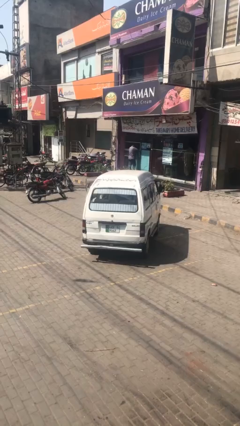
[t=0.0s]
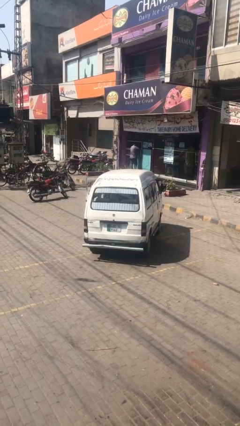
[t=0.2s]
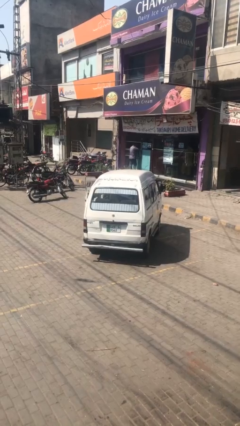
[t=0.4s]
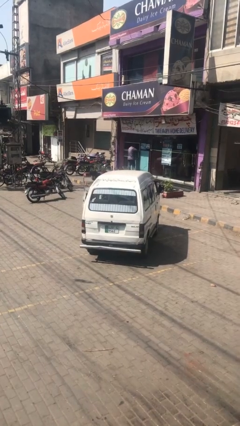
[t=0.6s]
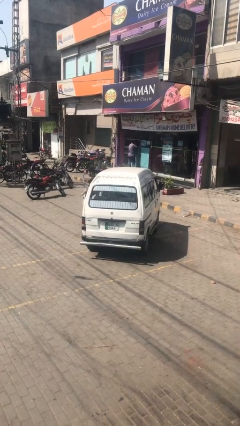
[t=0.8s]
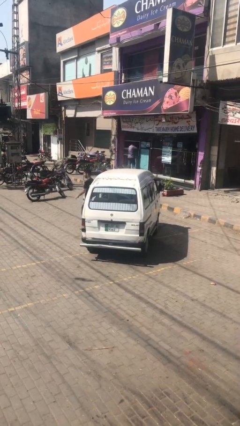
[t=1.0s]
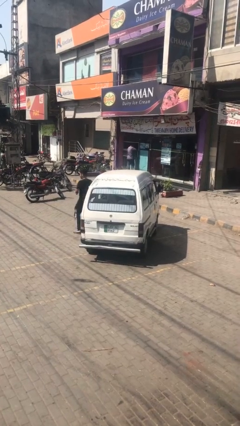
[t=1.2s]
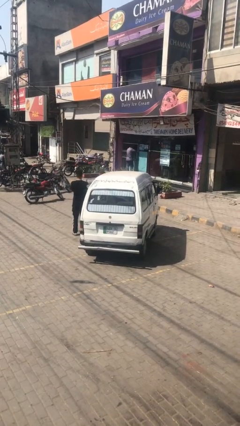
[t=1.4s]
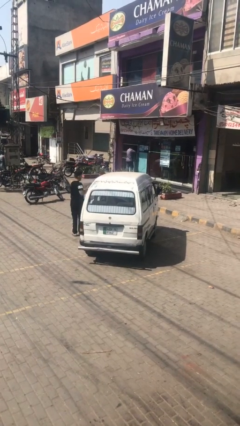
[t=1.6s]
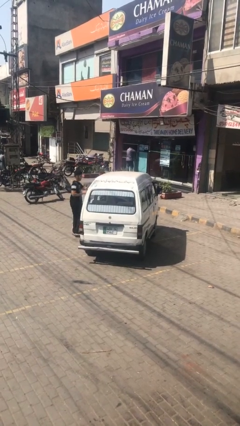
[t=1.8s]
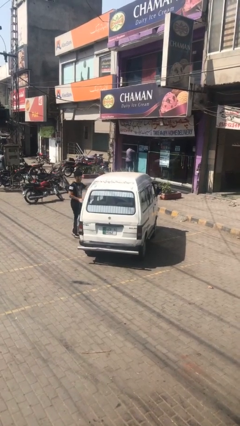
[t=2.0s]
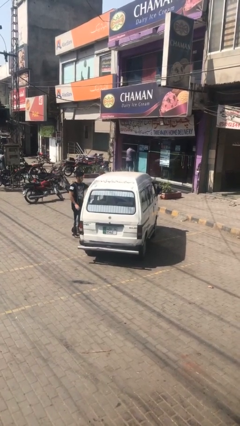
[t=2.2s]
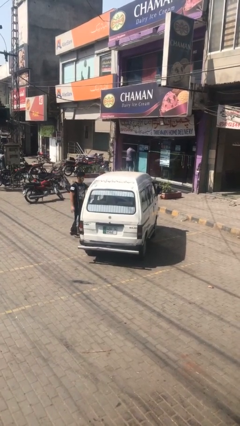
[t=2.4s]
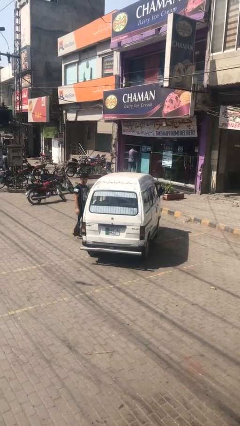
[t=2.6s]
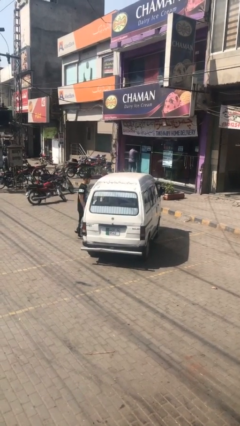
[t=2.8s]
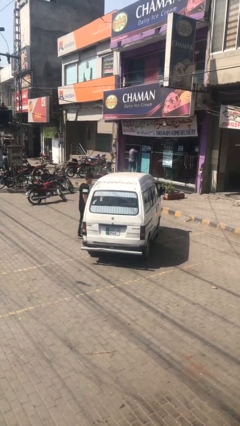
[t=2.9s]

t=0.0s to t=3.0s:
car drops off person

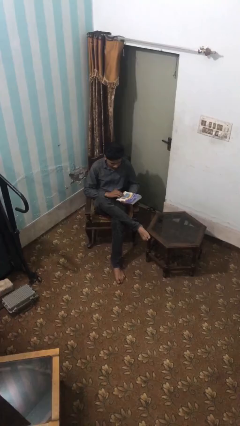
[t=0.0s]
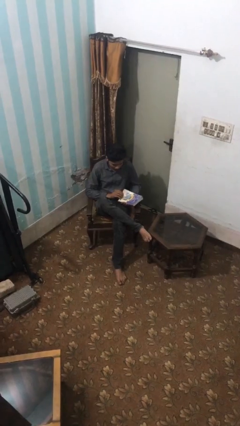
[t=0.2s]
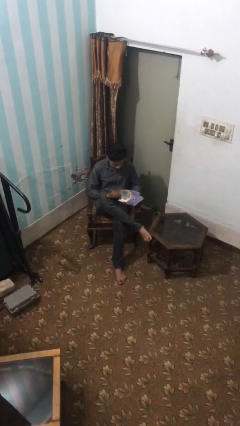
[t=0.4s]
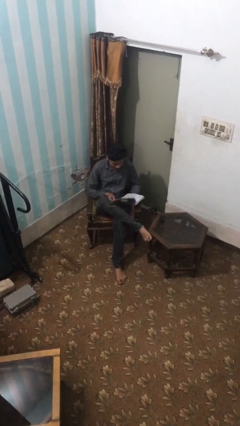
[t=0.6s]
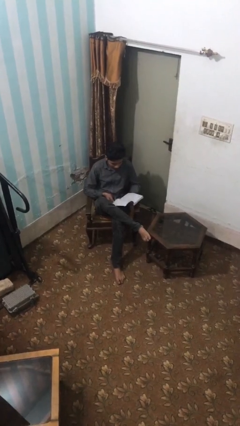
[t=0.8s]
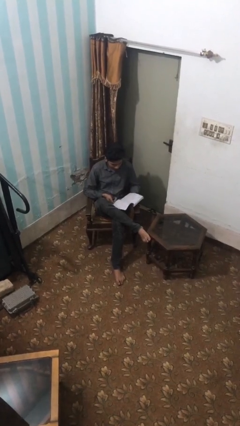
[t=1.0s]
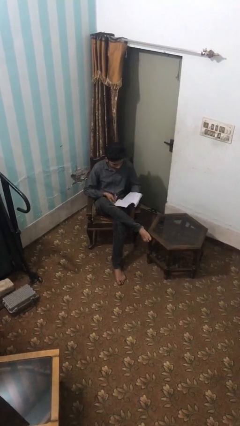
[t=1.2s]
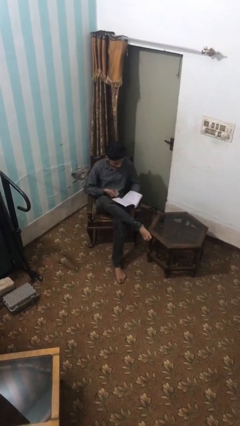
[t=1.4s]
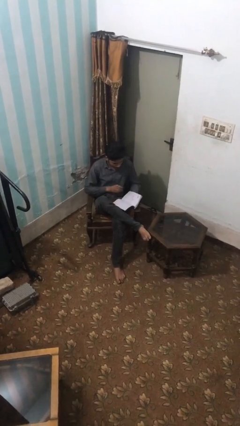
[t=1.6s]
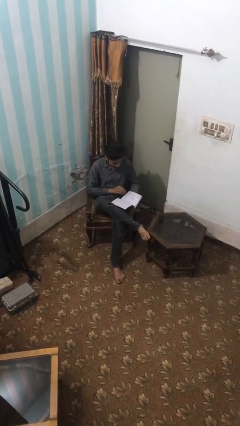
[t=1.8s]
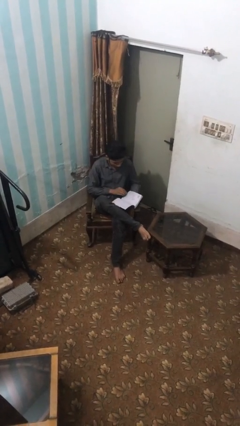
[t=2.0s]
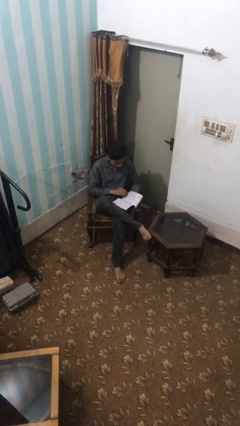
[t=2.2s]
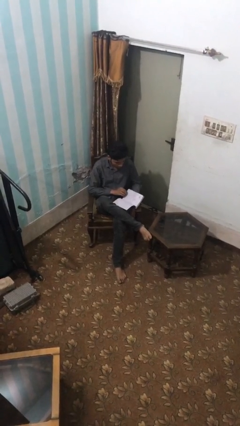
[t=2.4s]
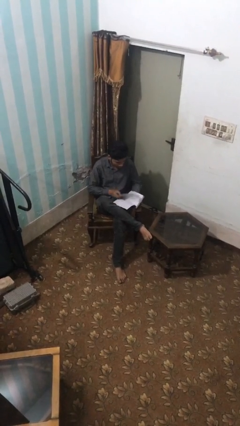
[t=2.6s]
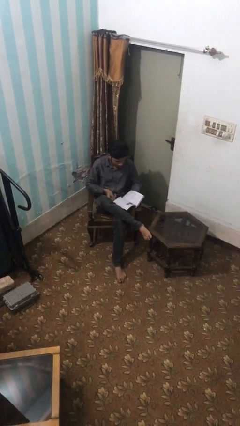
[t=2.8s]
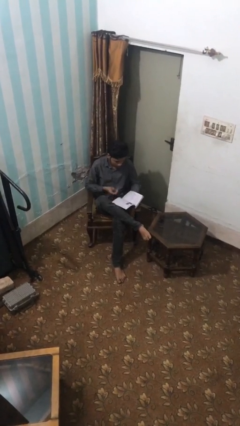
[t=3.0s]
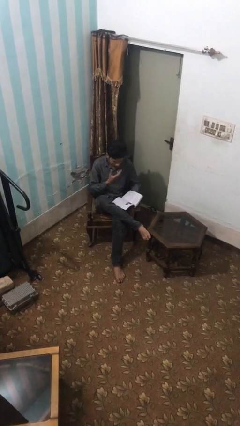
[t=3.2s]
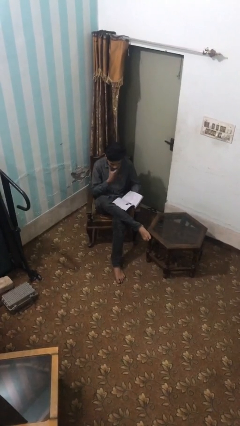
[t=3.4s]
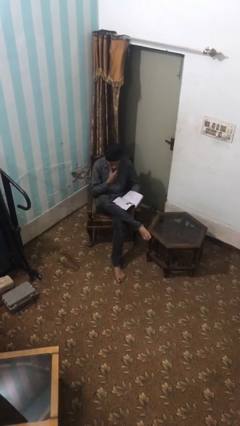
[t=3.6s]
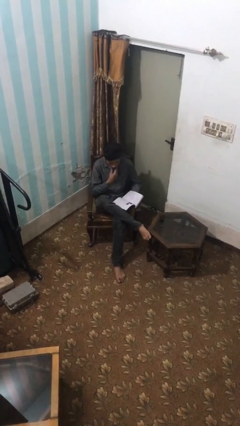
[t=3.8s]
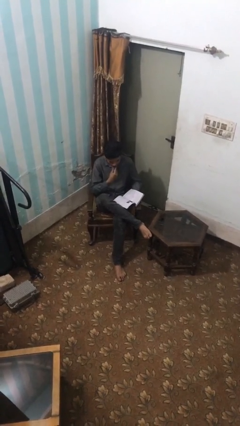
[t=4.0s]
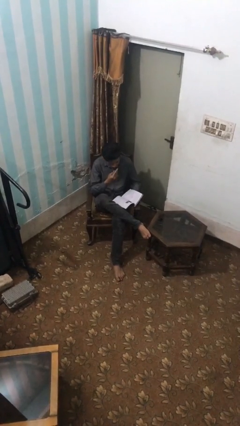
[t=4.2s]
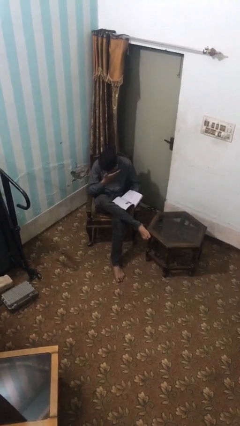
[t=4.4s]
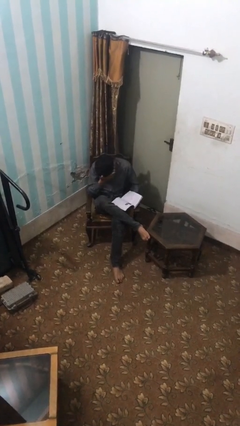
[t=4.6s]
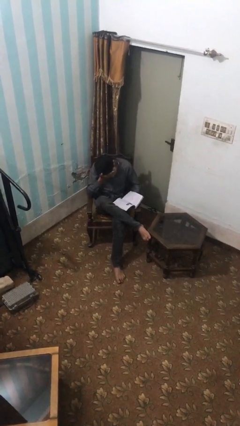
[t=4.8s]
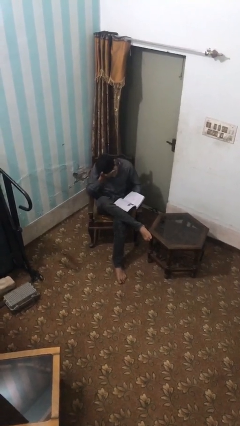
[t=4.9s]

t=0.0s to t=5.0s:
person reads document

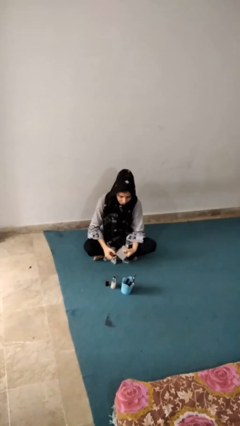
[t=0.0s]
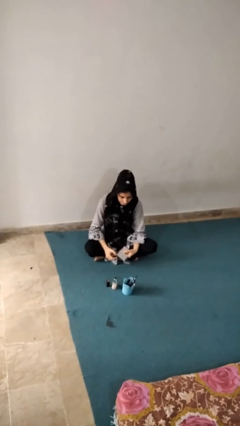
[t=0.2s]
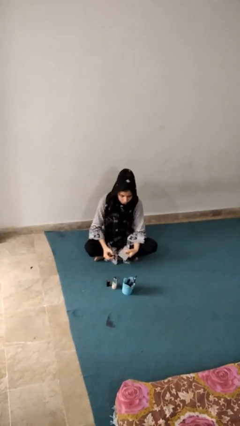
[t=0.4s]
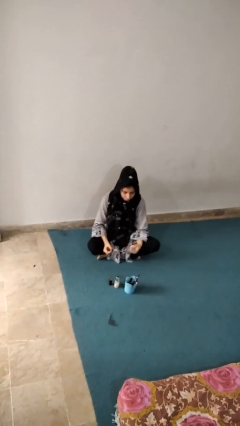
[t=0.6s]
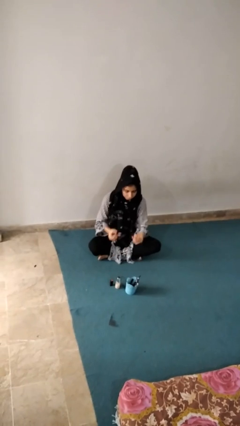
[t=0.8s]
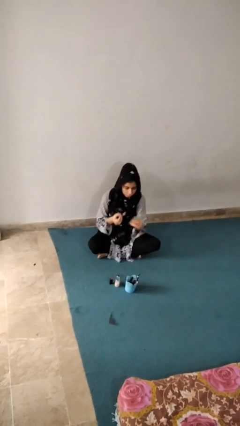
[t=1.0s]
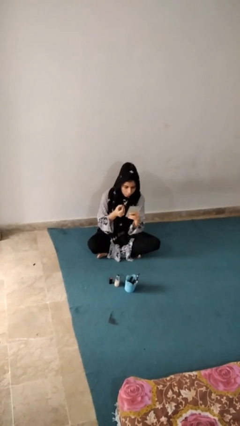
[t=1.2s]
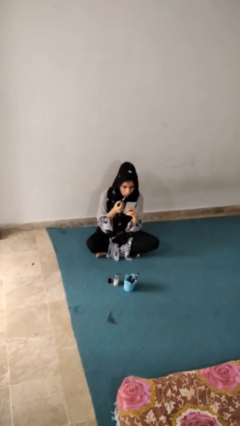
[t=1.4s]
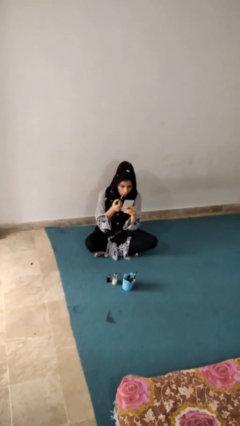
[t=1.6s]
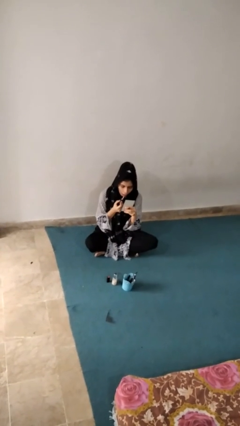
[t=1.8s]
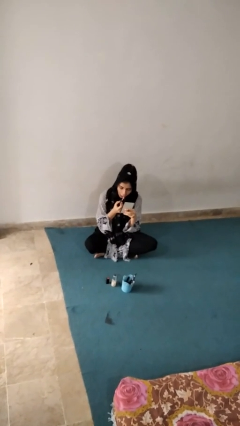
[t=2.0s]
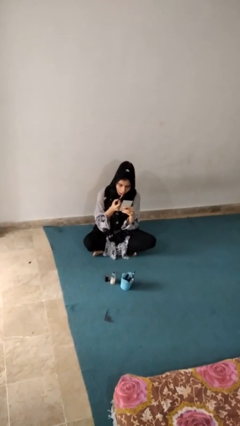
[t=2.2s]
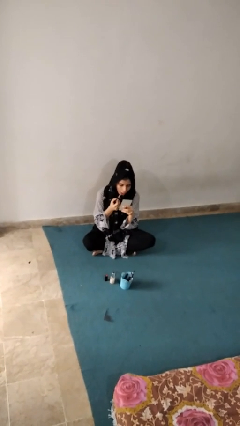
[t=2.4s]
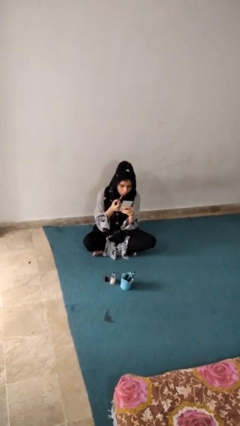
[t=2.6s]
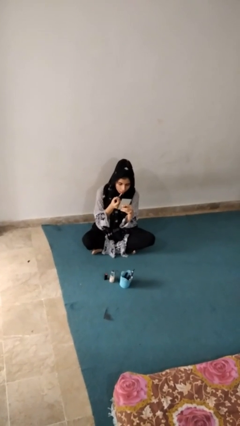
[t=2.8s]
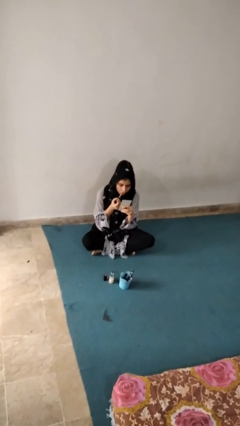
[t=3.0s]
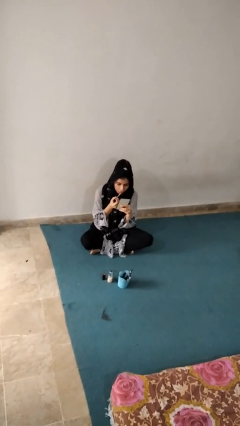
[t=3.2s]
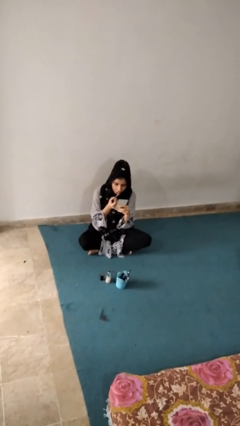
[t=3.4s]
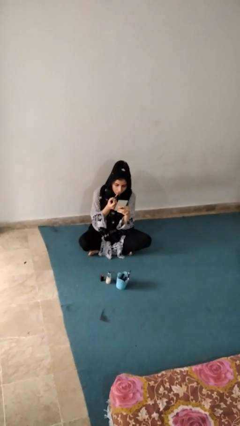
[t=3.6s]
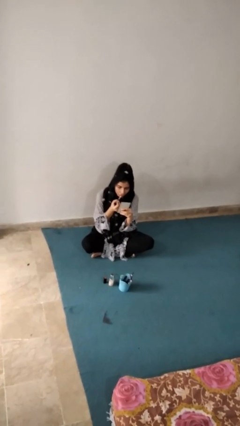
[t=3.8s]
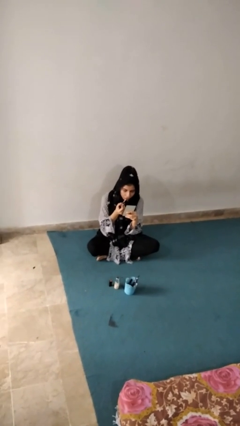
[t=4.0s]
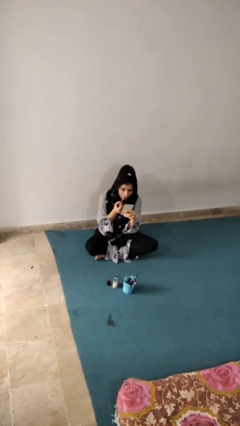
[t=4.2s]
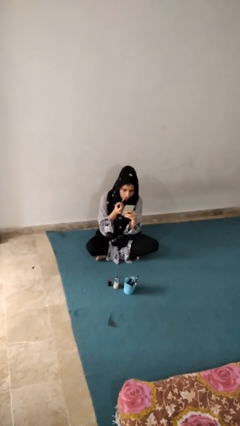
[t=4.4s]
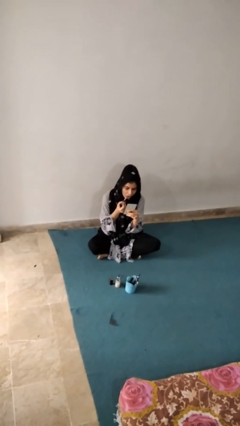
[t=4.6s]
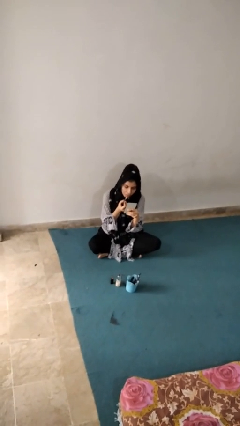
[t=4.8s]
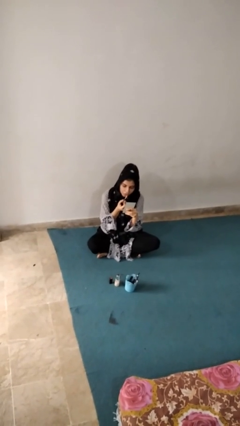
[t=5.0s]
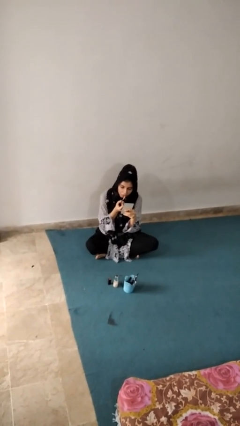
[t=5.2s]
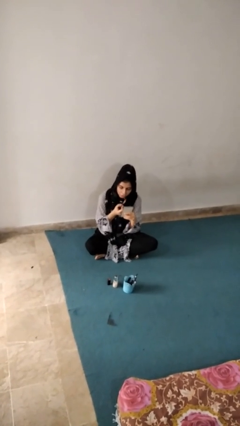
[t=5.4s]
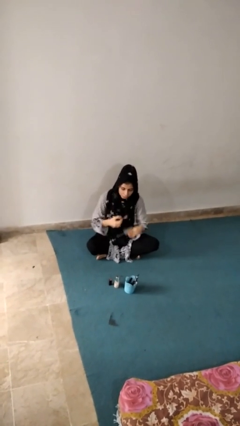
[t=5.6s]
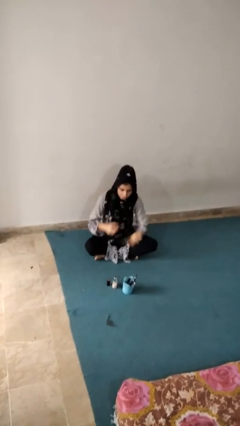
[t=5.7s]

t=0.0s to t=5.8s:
person applies lip makeup

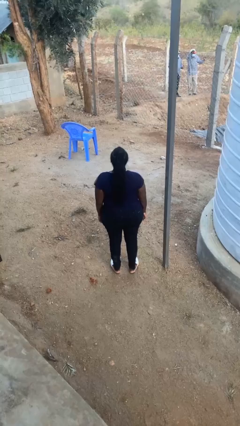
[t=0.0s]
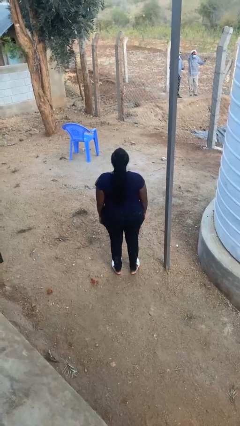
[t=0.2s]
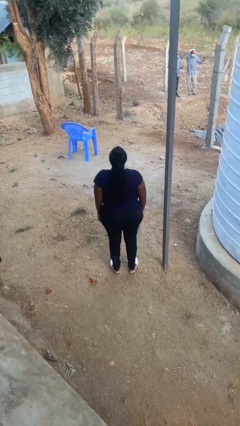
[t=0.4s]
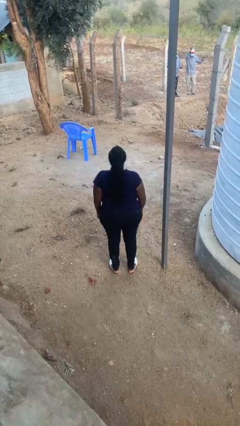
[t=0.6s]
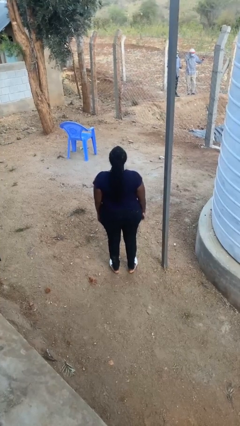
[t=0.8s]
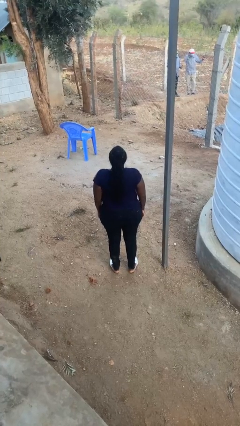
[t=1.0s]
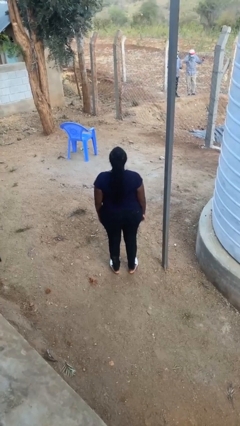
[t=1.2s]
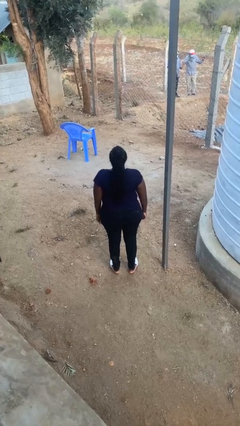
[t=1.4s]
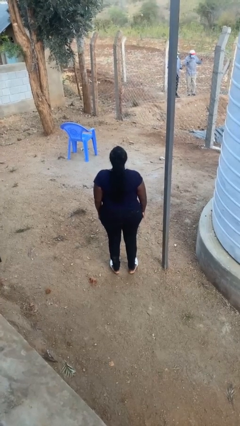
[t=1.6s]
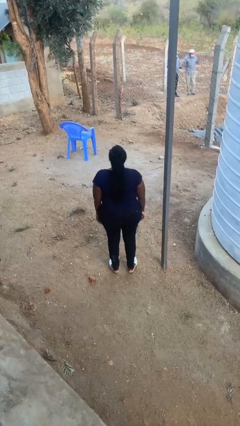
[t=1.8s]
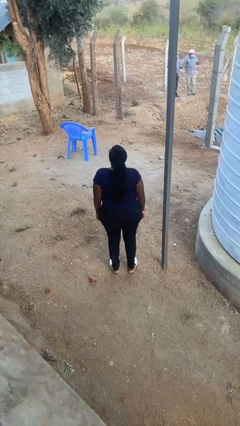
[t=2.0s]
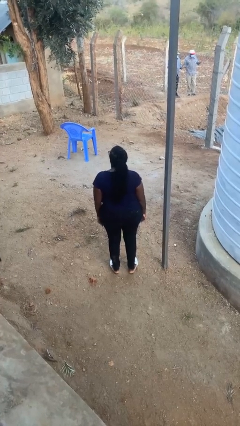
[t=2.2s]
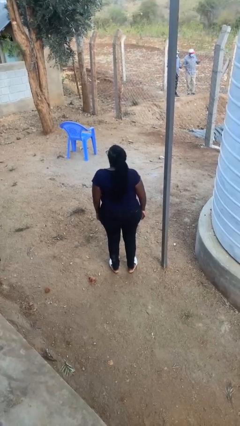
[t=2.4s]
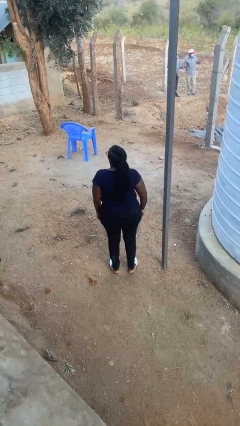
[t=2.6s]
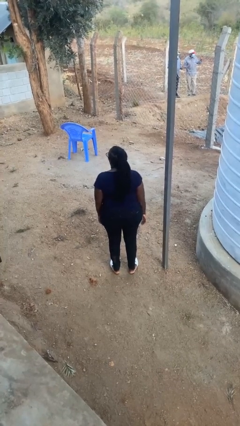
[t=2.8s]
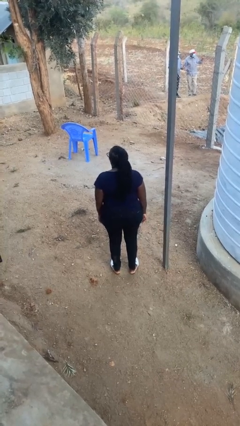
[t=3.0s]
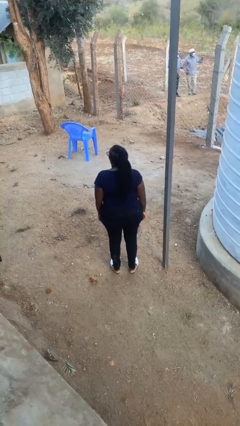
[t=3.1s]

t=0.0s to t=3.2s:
person shrugs

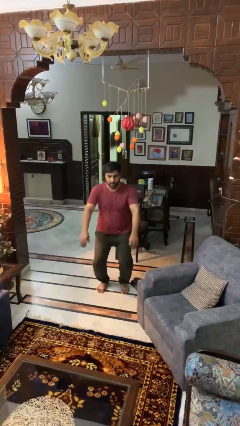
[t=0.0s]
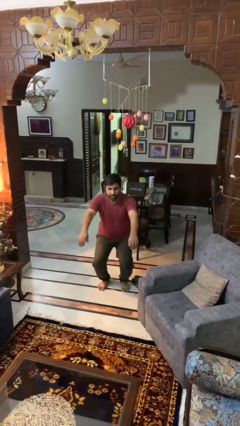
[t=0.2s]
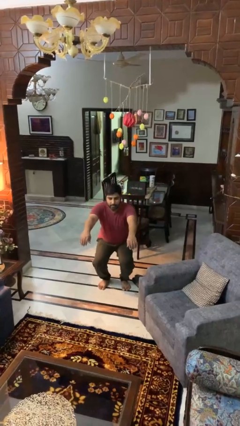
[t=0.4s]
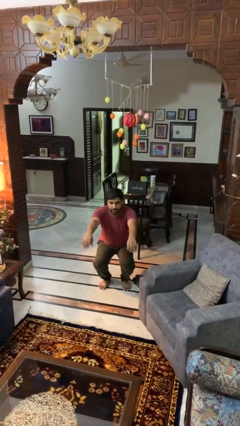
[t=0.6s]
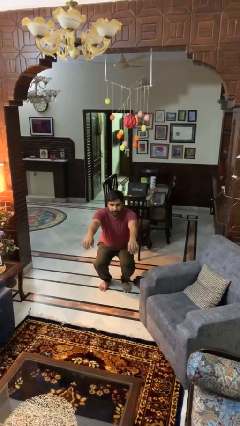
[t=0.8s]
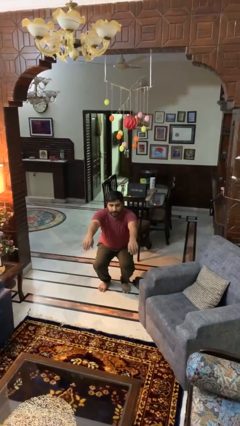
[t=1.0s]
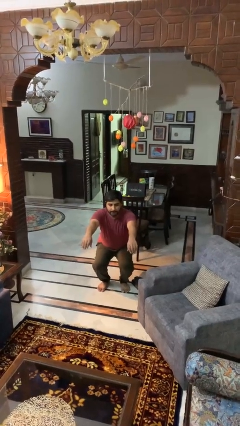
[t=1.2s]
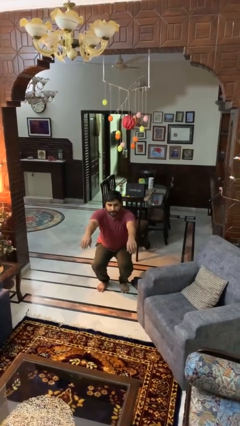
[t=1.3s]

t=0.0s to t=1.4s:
person squats
